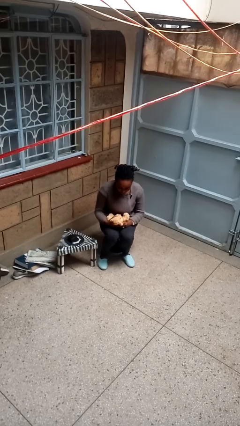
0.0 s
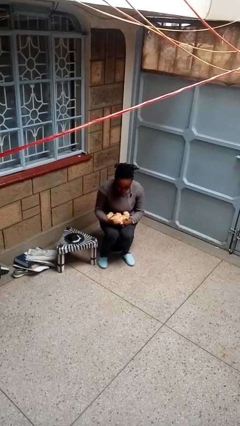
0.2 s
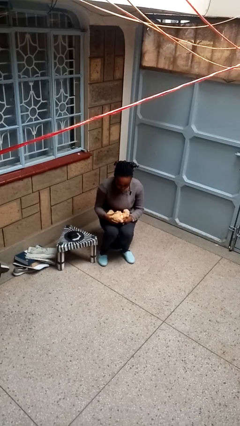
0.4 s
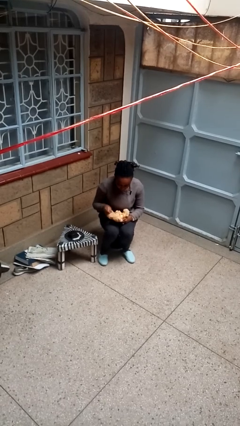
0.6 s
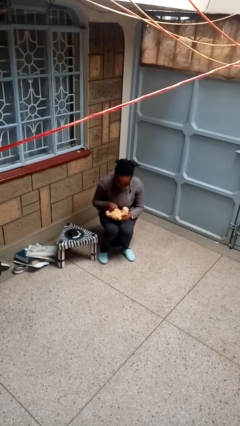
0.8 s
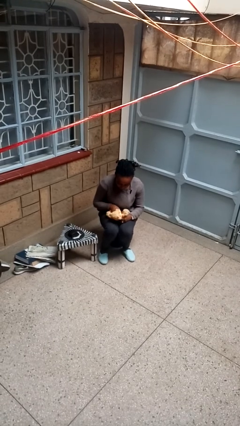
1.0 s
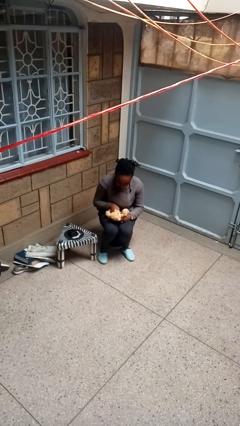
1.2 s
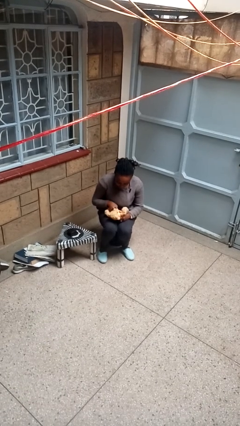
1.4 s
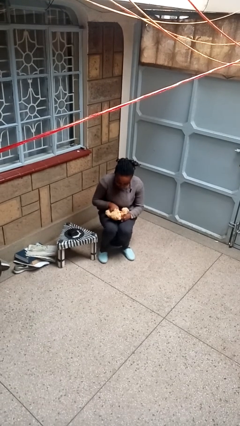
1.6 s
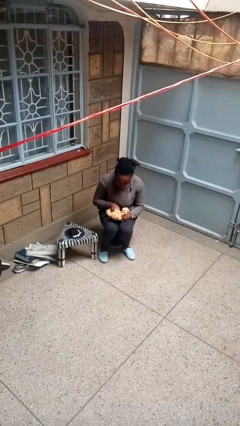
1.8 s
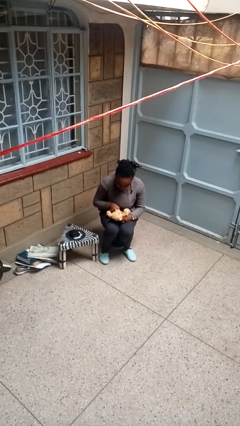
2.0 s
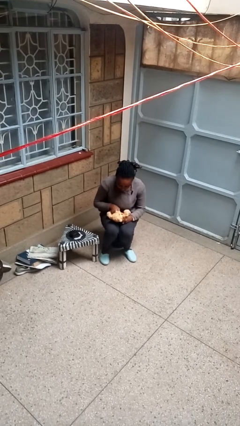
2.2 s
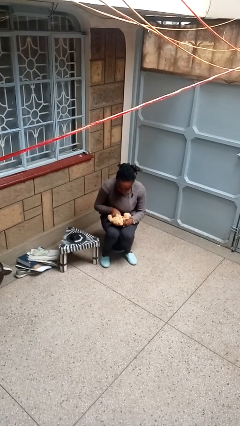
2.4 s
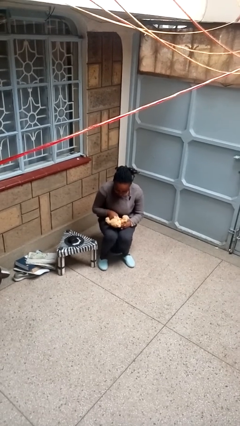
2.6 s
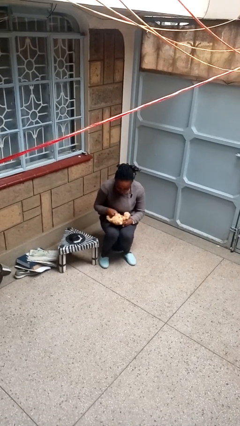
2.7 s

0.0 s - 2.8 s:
person squeezes object

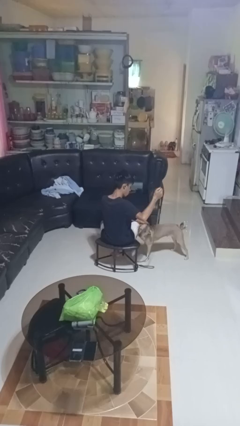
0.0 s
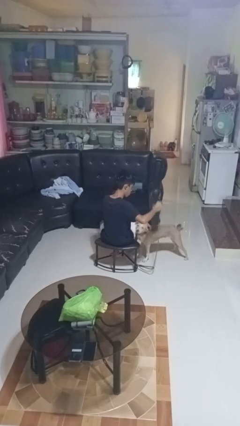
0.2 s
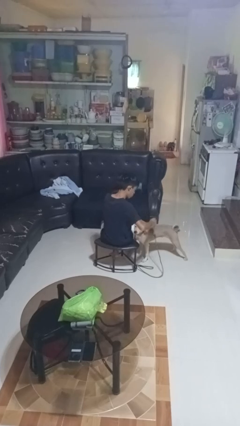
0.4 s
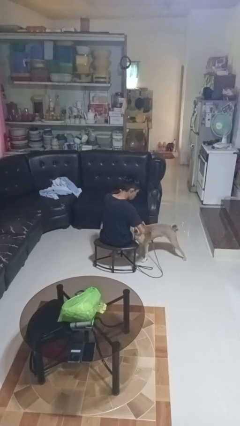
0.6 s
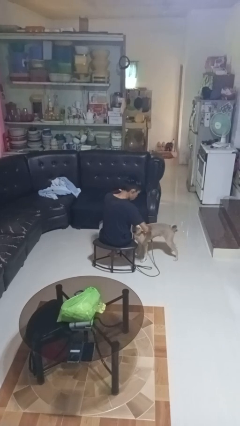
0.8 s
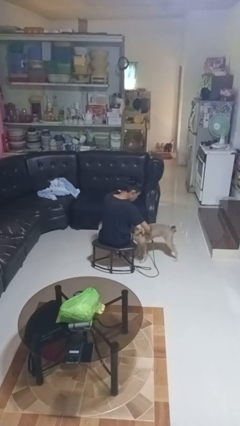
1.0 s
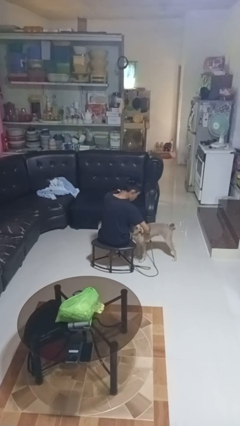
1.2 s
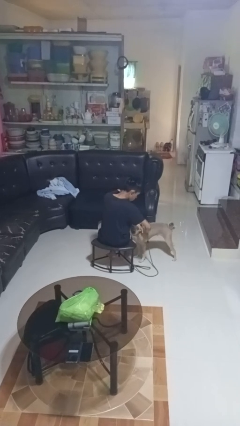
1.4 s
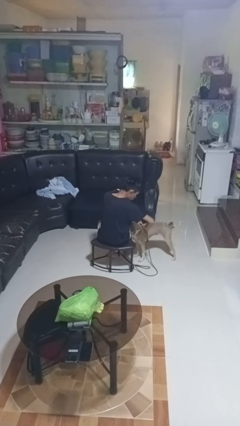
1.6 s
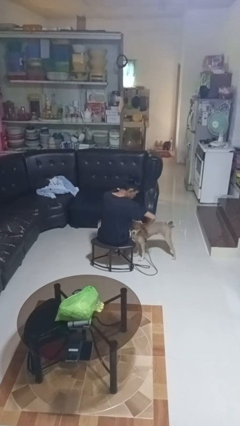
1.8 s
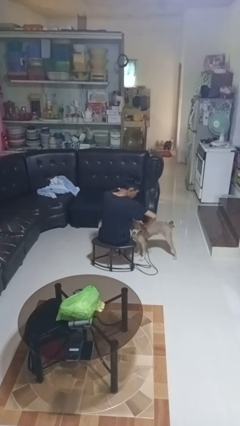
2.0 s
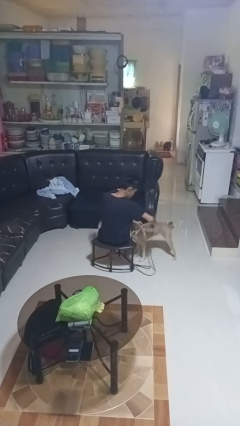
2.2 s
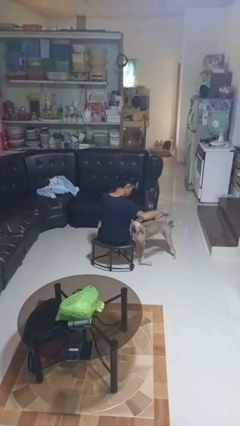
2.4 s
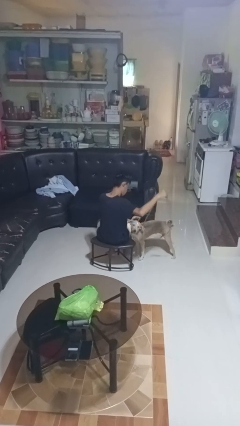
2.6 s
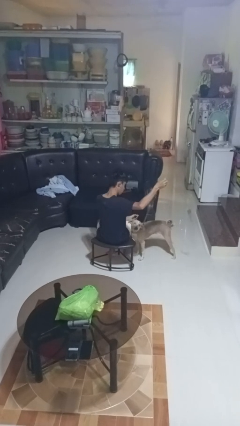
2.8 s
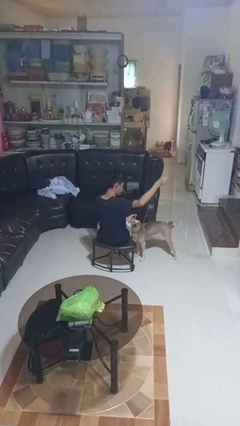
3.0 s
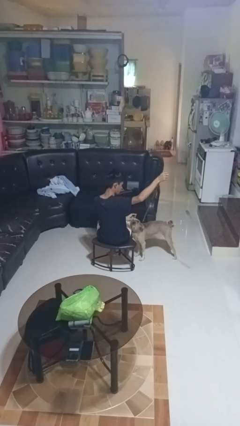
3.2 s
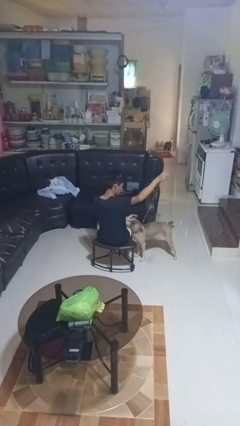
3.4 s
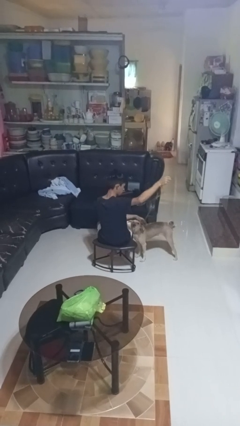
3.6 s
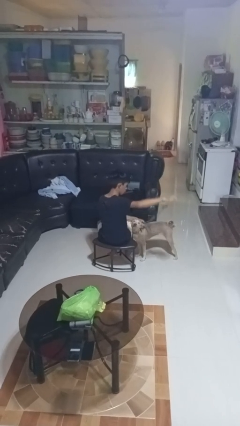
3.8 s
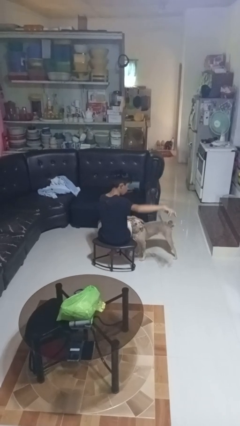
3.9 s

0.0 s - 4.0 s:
person attaches leash to dog

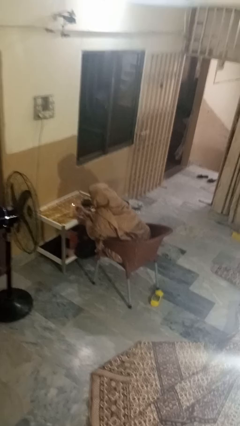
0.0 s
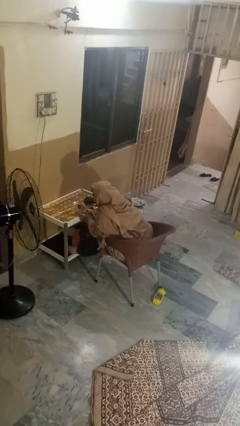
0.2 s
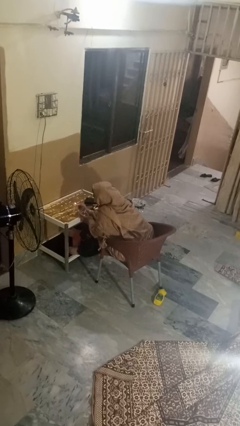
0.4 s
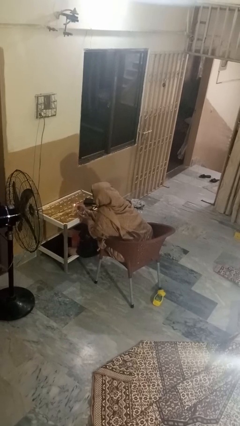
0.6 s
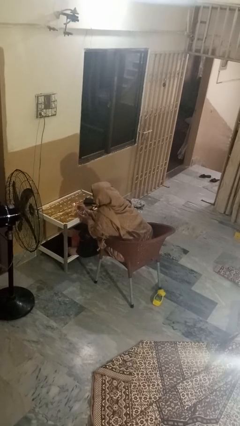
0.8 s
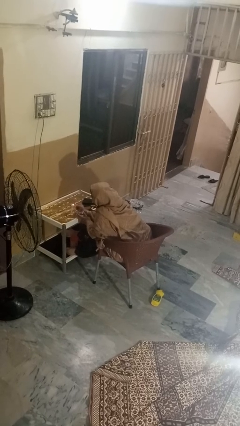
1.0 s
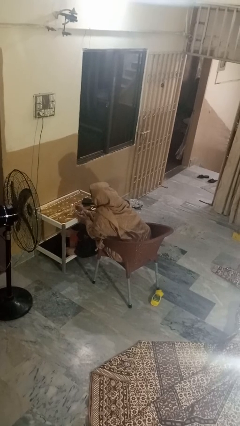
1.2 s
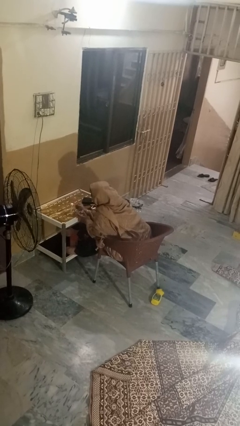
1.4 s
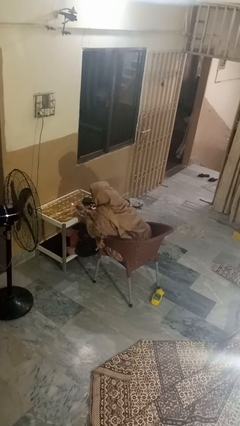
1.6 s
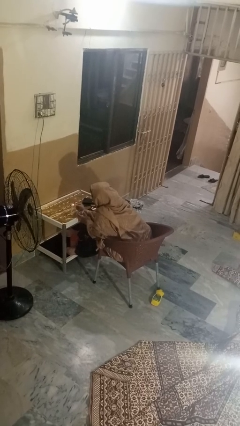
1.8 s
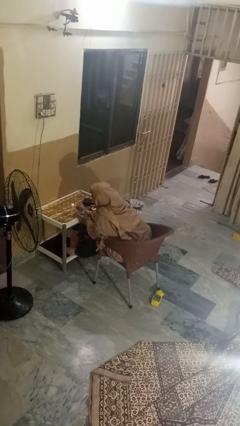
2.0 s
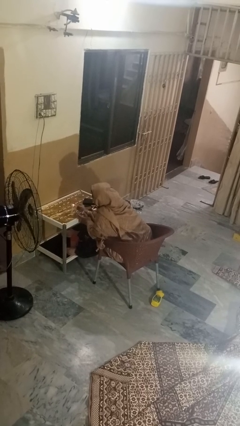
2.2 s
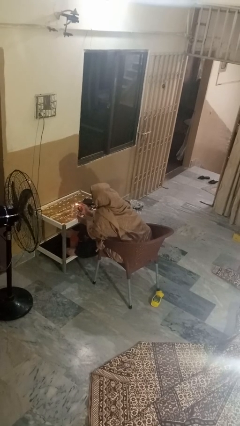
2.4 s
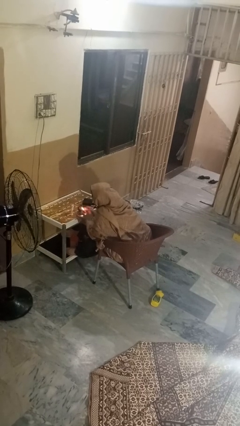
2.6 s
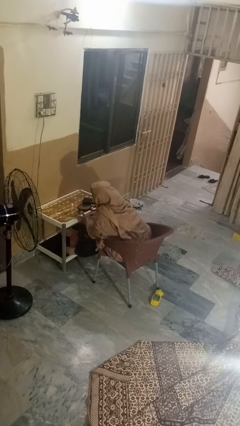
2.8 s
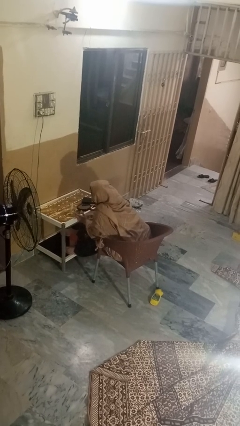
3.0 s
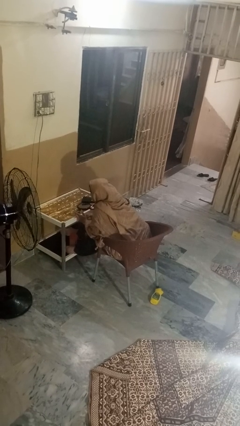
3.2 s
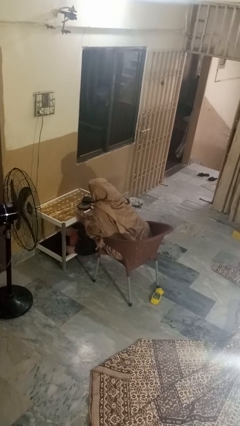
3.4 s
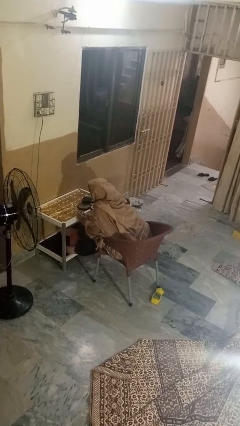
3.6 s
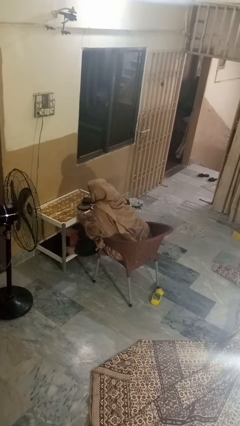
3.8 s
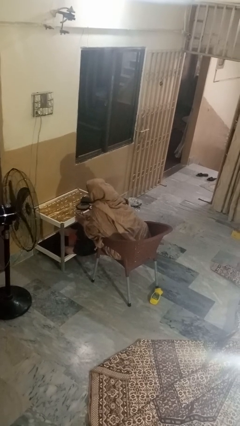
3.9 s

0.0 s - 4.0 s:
person lights candle

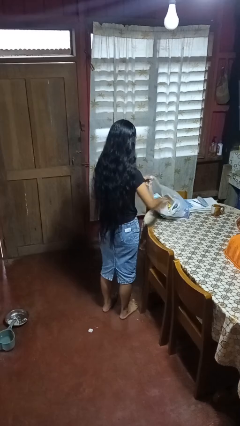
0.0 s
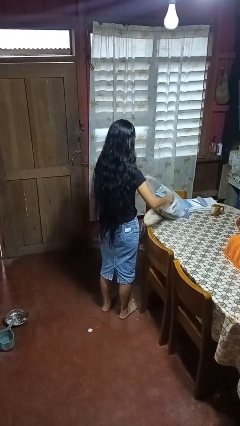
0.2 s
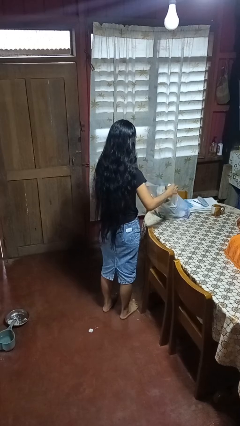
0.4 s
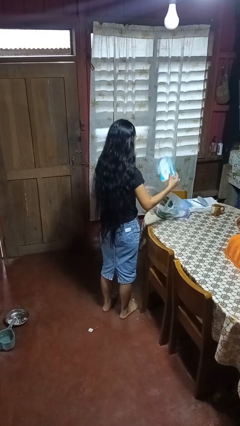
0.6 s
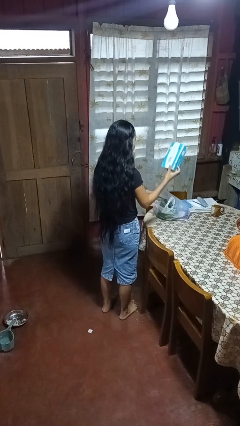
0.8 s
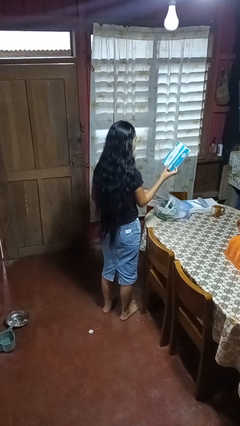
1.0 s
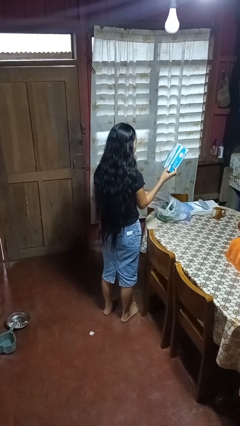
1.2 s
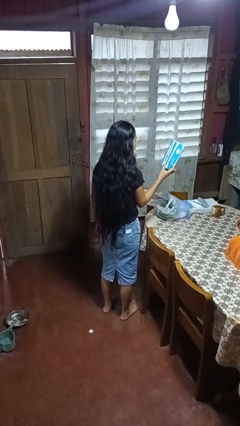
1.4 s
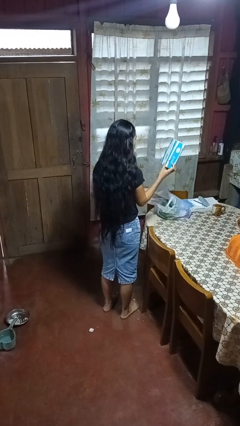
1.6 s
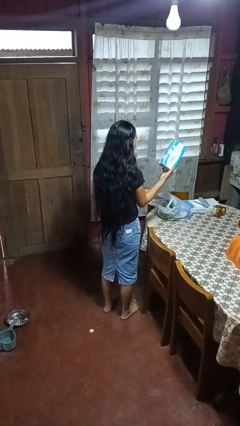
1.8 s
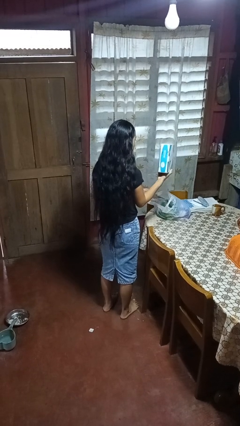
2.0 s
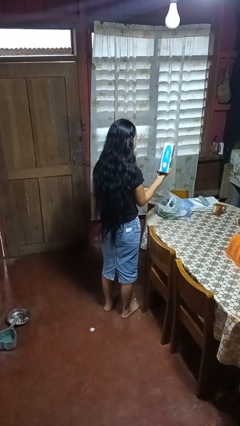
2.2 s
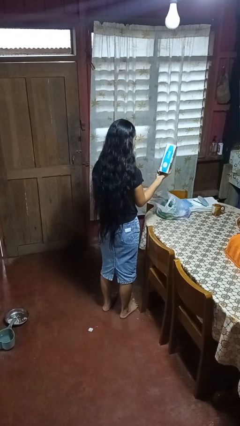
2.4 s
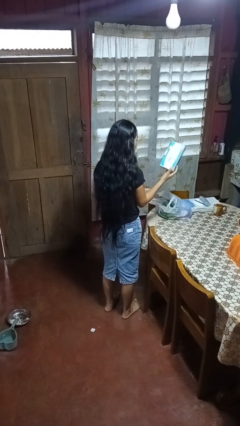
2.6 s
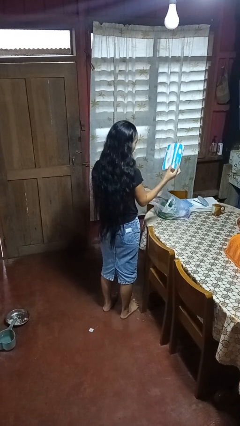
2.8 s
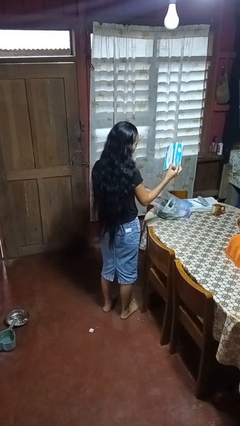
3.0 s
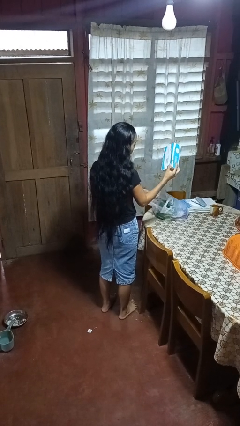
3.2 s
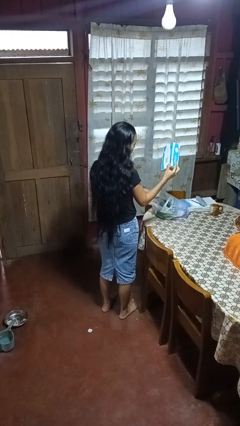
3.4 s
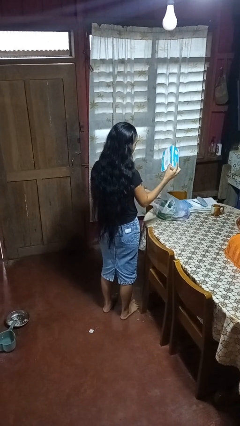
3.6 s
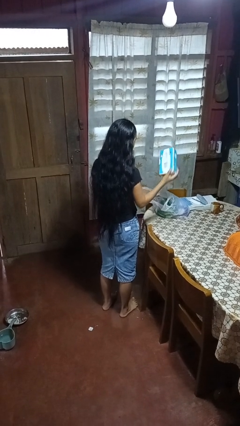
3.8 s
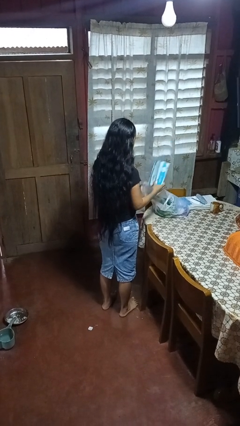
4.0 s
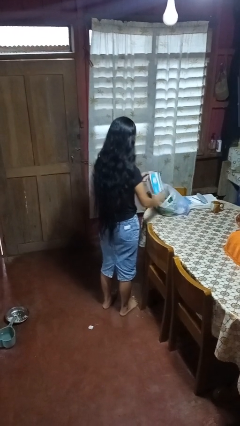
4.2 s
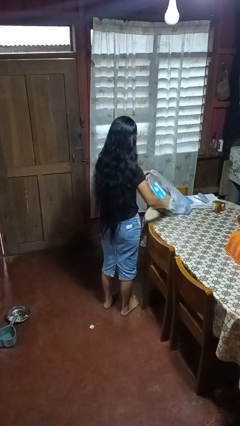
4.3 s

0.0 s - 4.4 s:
person takes object from bag

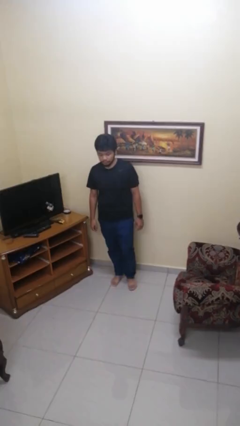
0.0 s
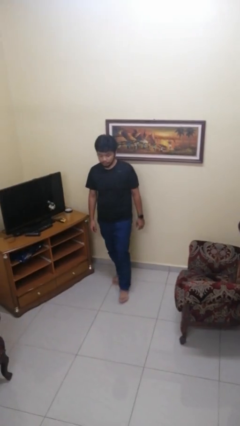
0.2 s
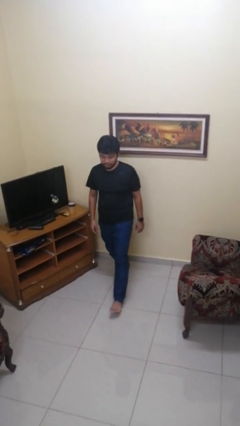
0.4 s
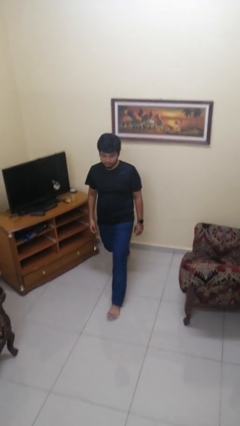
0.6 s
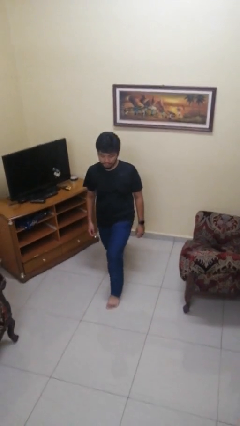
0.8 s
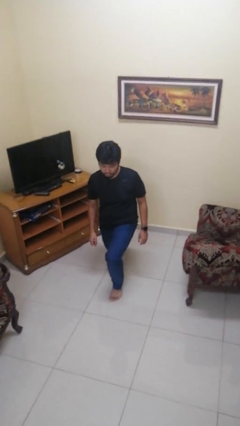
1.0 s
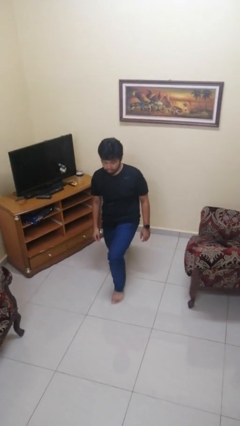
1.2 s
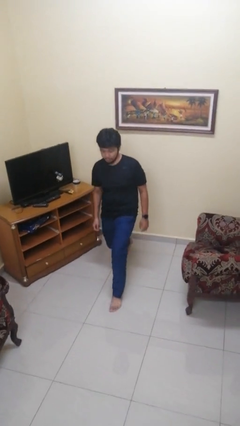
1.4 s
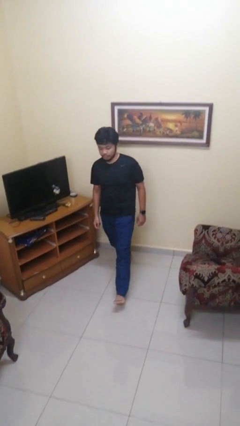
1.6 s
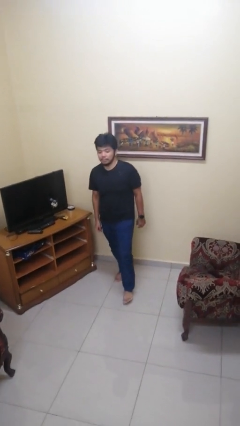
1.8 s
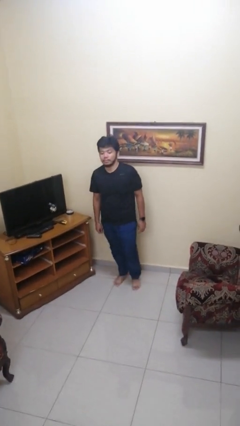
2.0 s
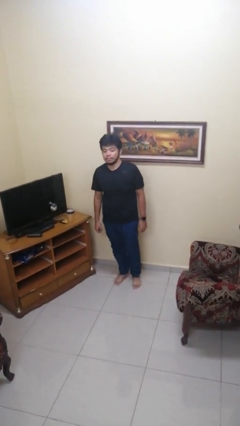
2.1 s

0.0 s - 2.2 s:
person exercises with lunges
